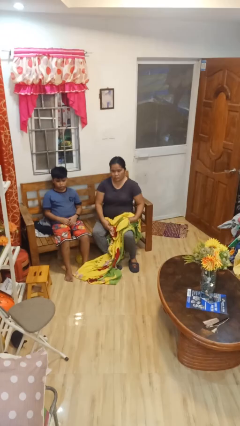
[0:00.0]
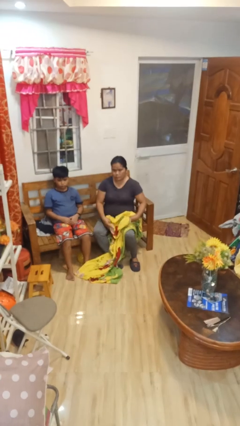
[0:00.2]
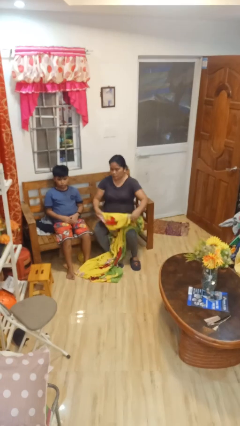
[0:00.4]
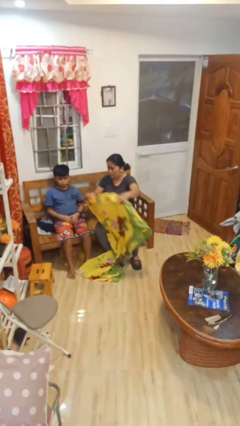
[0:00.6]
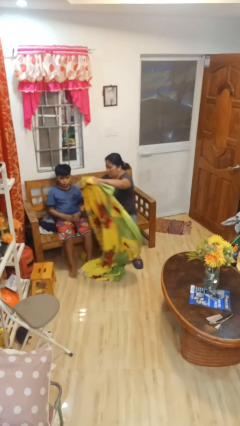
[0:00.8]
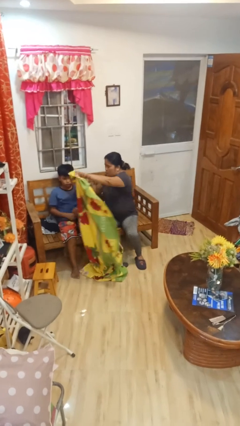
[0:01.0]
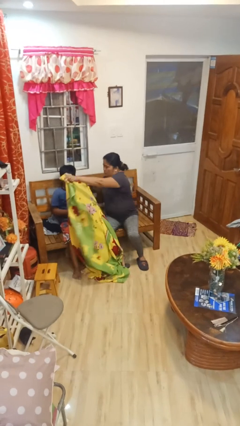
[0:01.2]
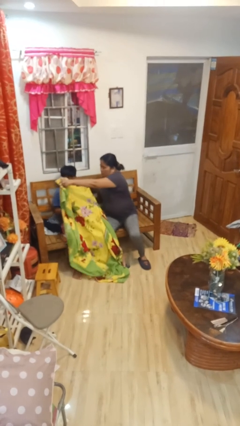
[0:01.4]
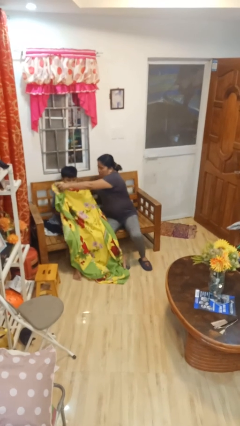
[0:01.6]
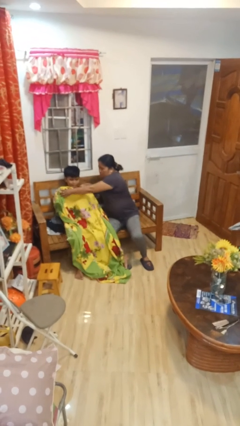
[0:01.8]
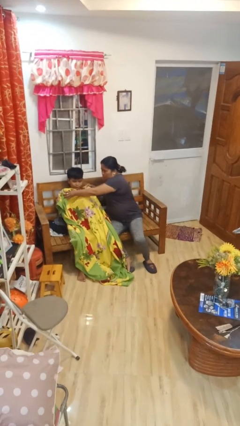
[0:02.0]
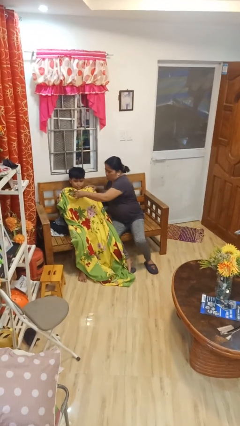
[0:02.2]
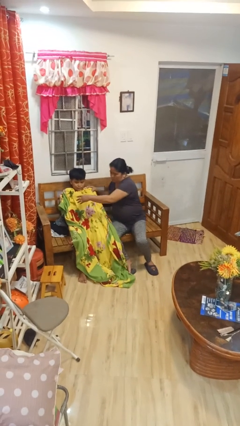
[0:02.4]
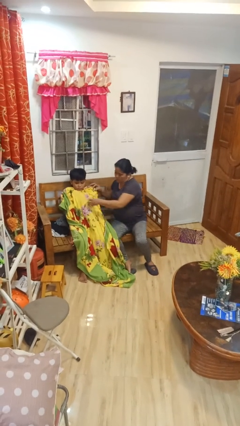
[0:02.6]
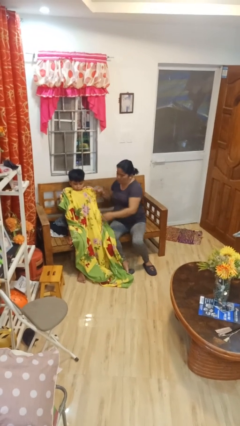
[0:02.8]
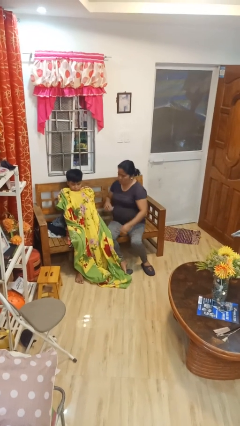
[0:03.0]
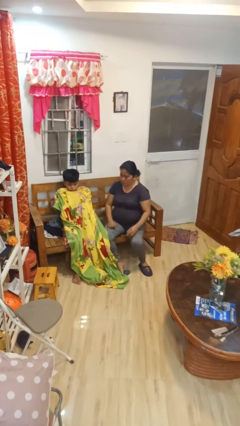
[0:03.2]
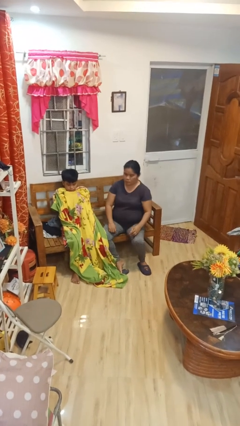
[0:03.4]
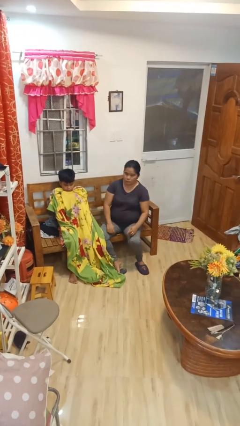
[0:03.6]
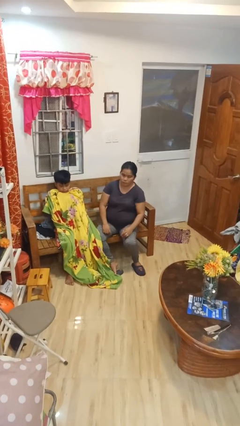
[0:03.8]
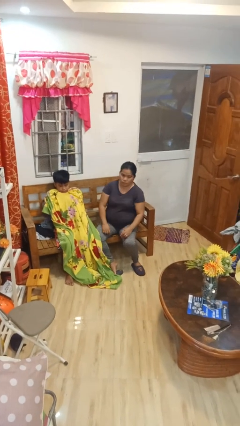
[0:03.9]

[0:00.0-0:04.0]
person covers friend with blanket

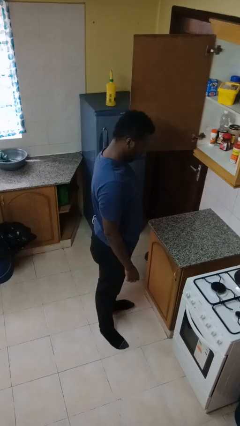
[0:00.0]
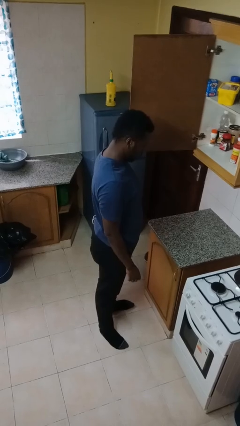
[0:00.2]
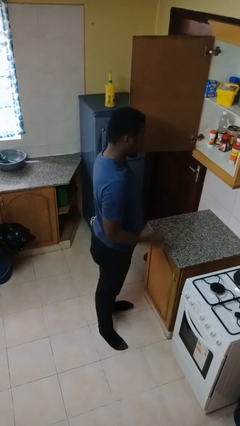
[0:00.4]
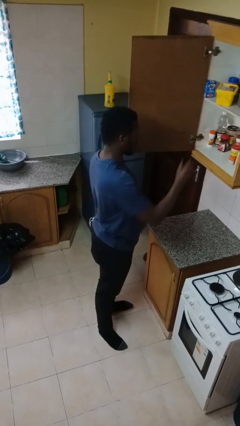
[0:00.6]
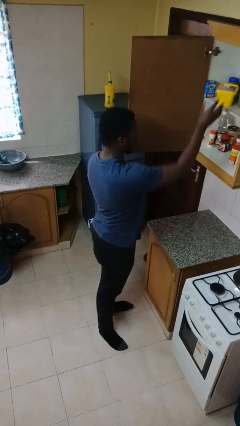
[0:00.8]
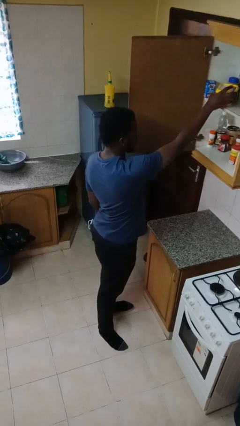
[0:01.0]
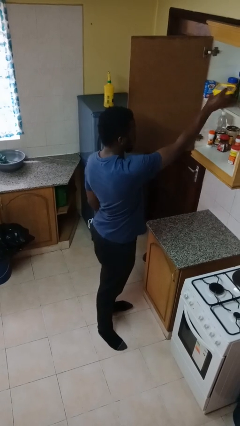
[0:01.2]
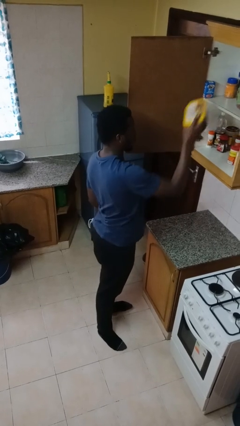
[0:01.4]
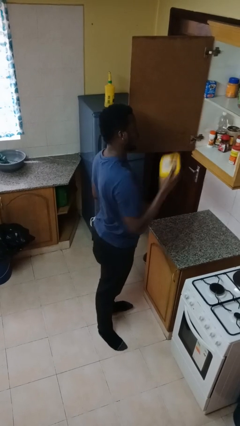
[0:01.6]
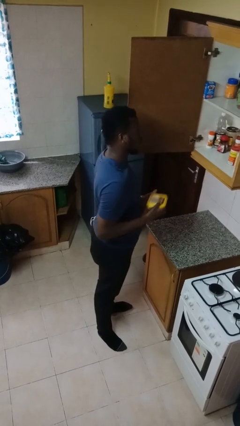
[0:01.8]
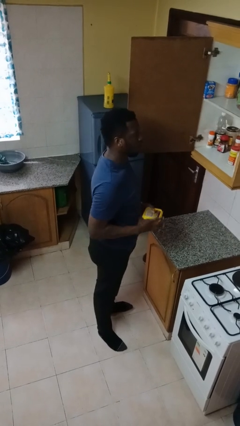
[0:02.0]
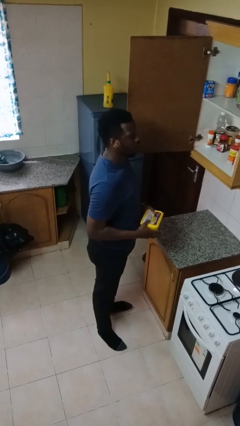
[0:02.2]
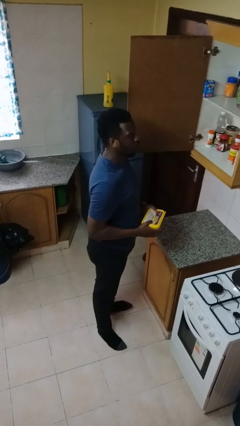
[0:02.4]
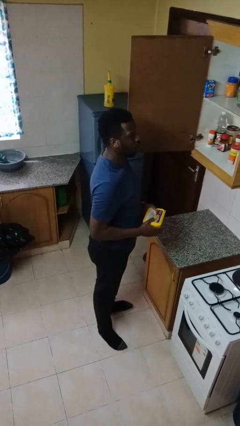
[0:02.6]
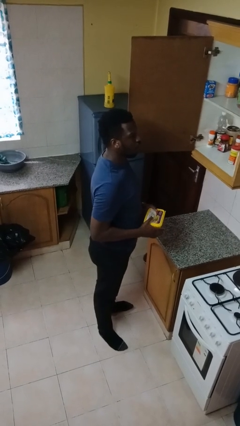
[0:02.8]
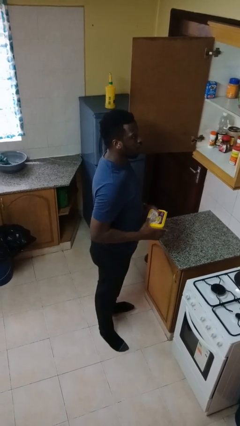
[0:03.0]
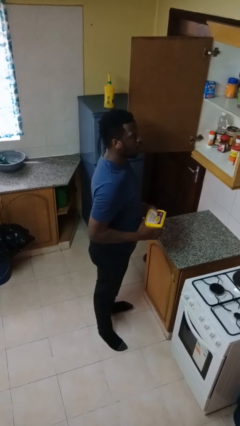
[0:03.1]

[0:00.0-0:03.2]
person picks up object from shelf

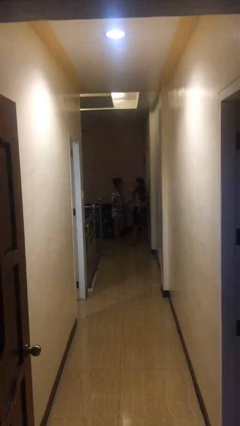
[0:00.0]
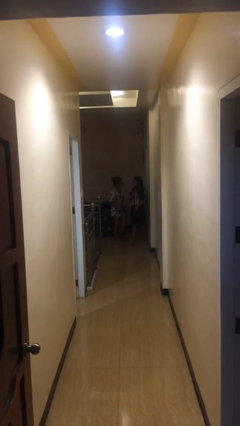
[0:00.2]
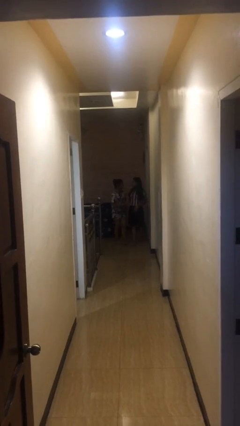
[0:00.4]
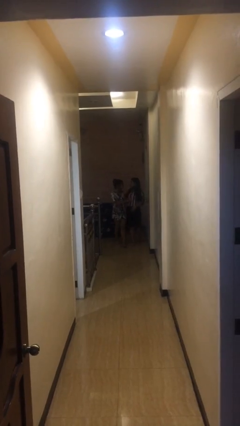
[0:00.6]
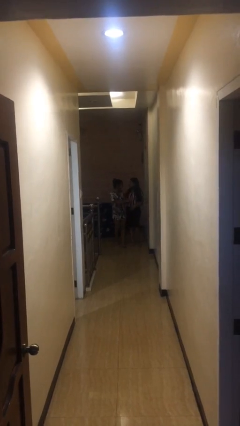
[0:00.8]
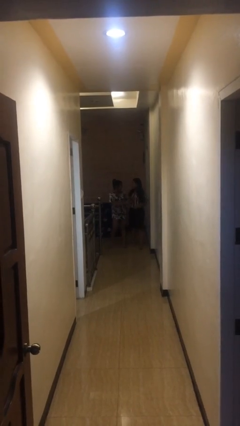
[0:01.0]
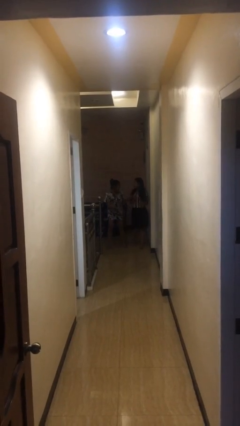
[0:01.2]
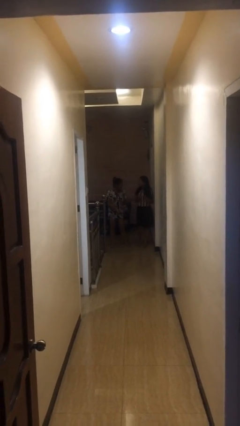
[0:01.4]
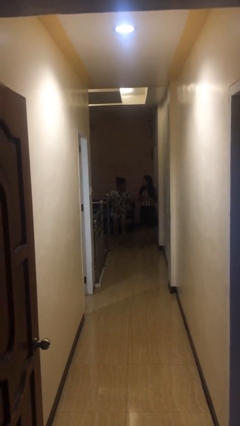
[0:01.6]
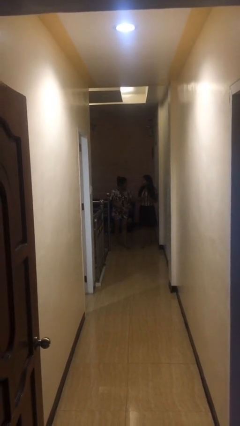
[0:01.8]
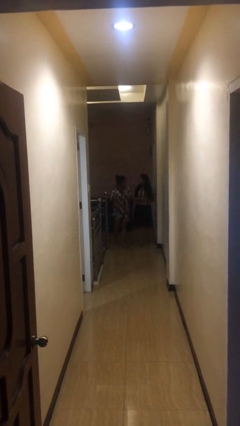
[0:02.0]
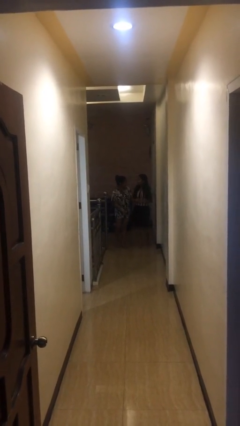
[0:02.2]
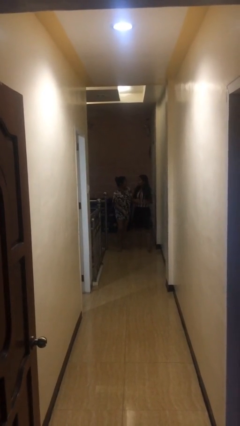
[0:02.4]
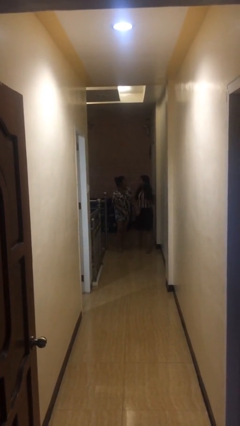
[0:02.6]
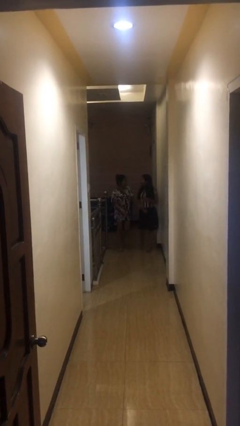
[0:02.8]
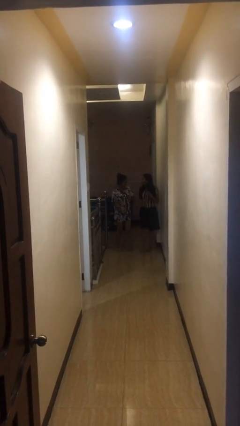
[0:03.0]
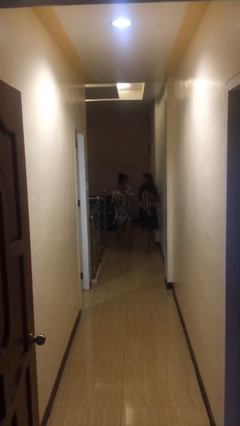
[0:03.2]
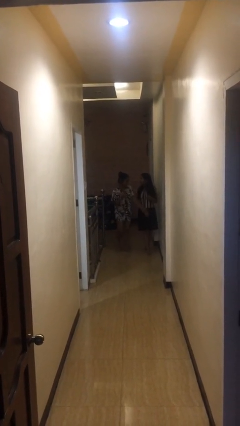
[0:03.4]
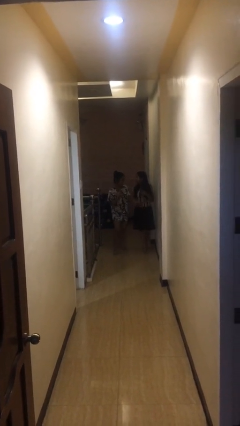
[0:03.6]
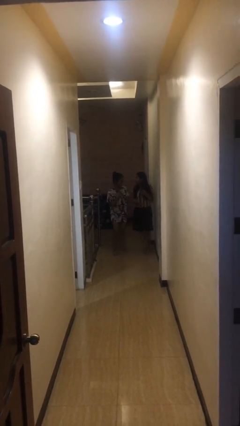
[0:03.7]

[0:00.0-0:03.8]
person talks to person

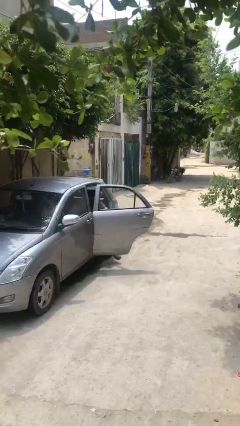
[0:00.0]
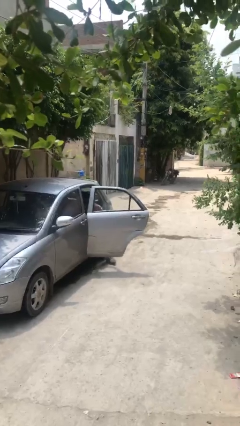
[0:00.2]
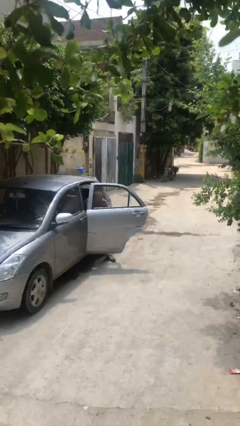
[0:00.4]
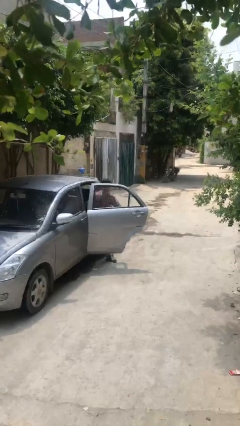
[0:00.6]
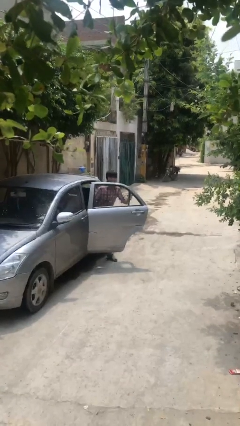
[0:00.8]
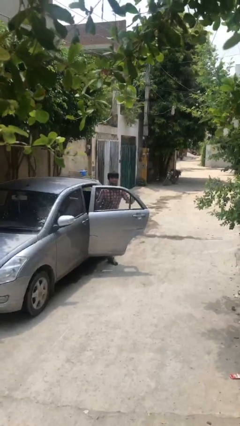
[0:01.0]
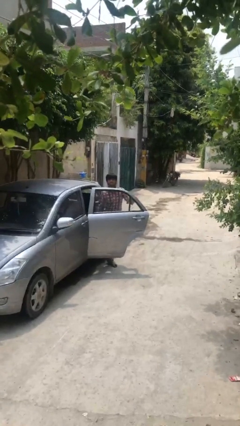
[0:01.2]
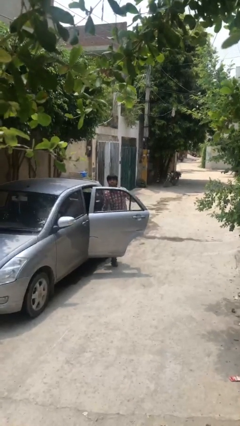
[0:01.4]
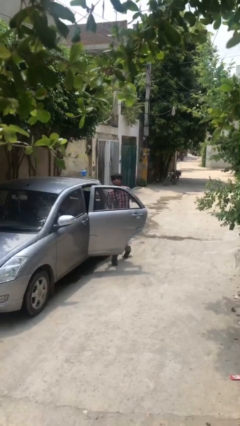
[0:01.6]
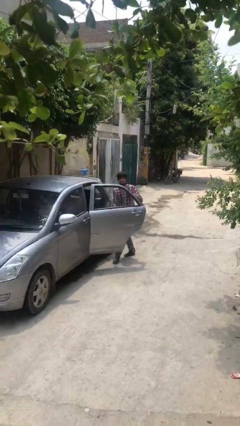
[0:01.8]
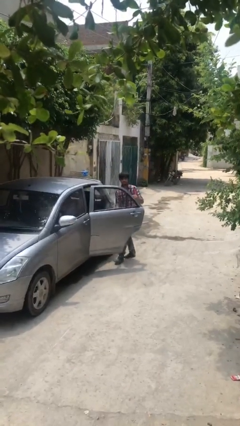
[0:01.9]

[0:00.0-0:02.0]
person exits car

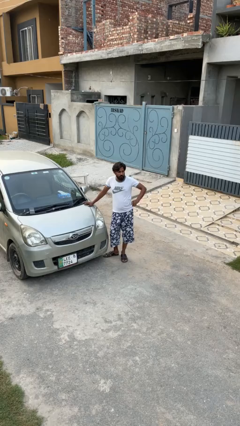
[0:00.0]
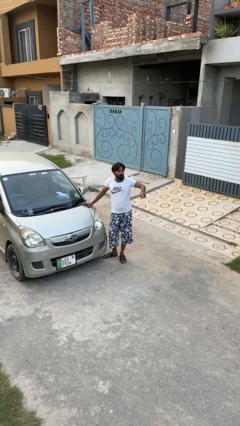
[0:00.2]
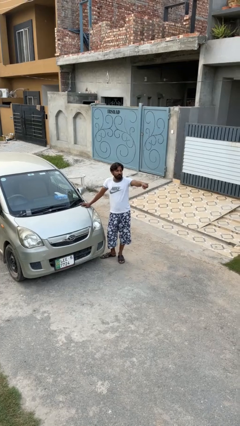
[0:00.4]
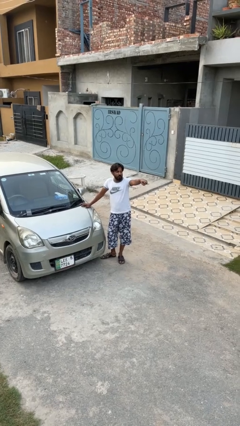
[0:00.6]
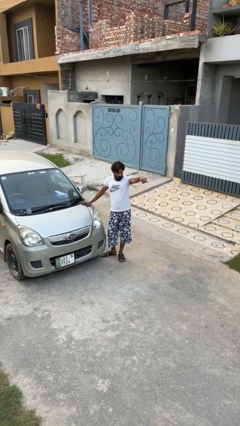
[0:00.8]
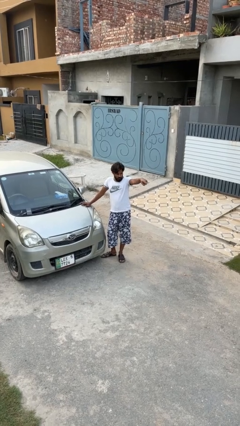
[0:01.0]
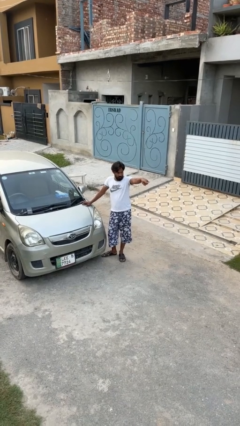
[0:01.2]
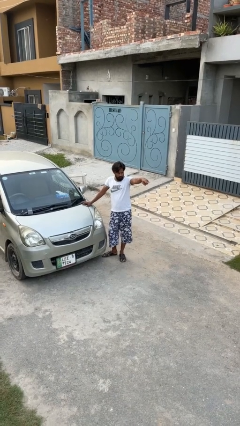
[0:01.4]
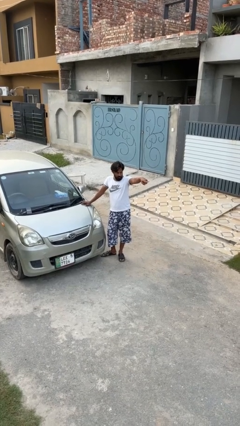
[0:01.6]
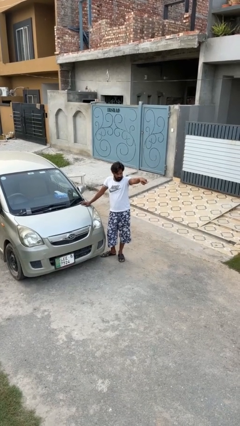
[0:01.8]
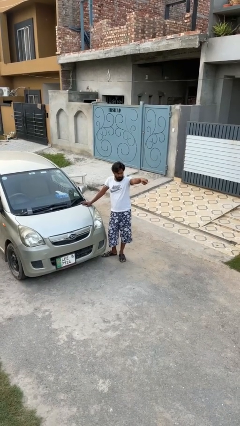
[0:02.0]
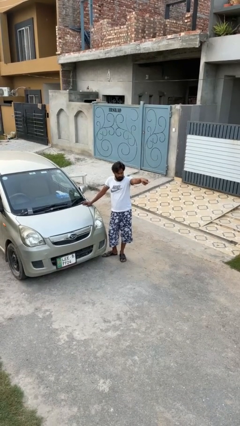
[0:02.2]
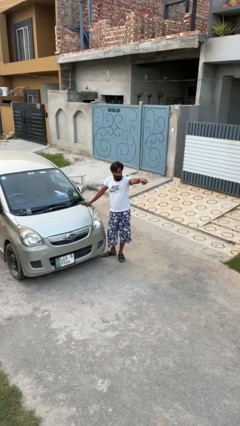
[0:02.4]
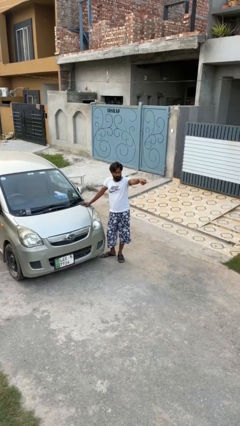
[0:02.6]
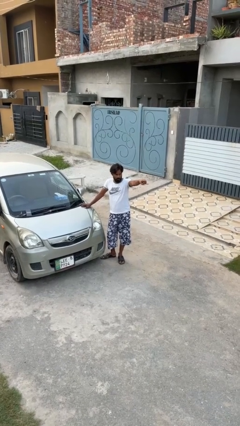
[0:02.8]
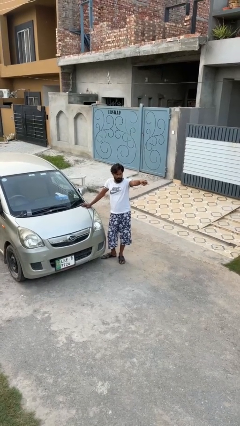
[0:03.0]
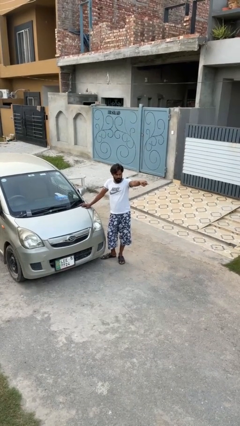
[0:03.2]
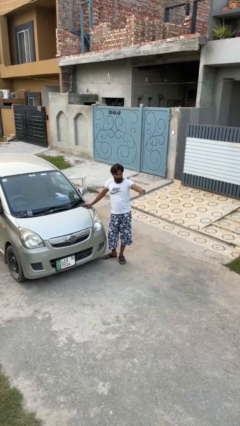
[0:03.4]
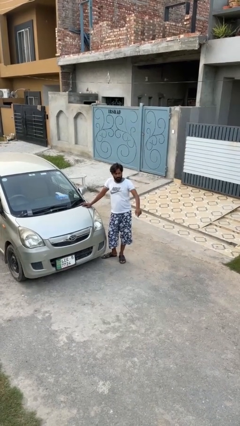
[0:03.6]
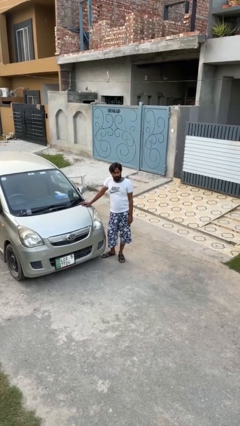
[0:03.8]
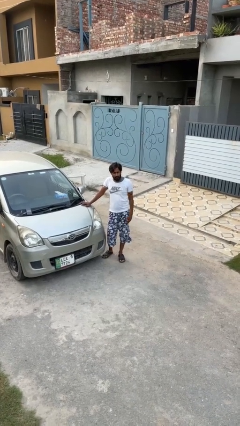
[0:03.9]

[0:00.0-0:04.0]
person points at person

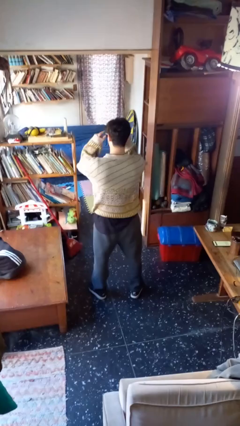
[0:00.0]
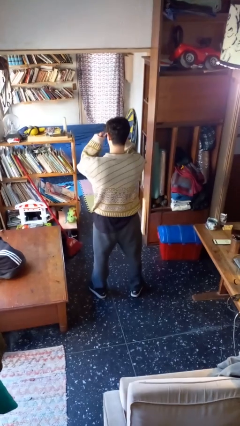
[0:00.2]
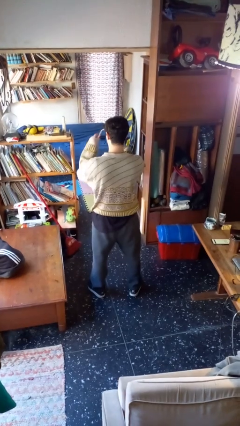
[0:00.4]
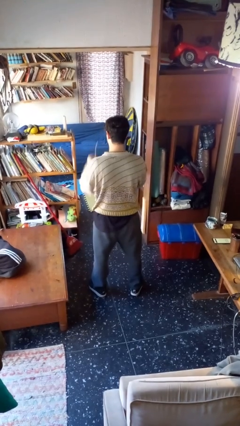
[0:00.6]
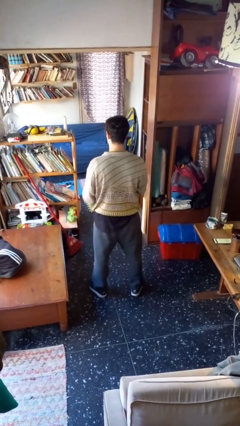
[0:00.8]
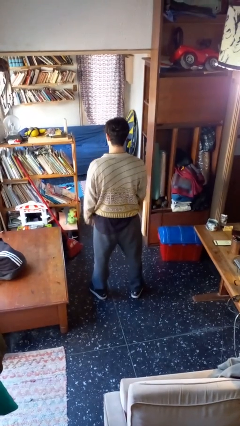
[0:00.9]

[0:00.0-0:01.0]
person takes off sunglasses
